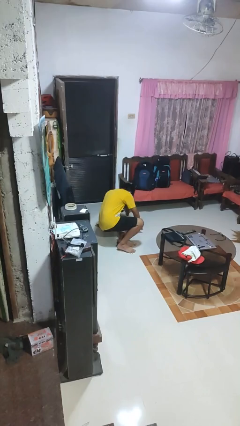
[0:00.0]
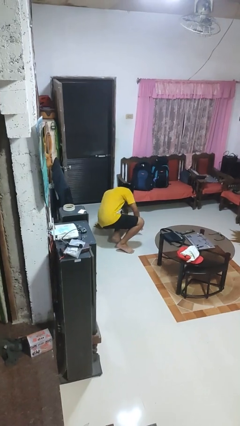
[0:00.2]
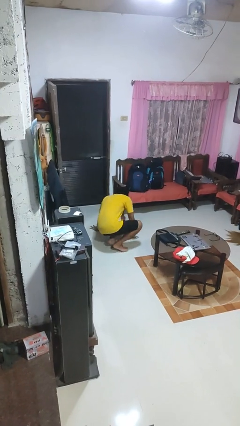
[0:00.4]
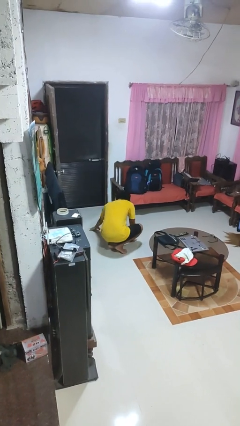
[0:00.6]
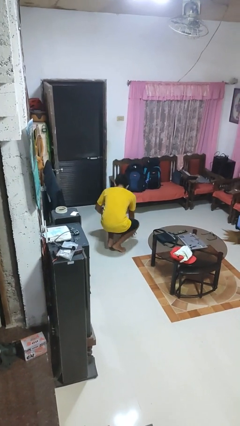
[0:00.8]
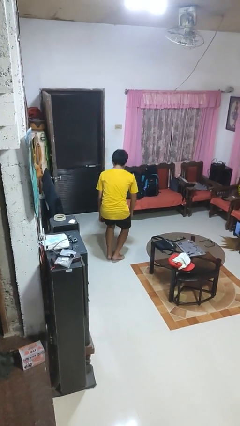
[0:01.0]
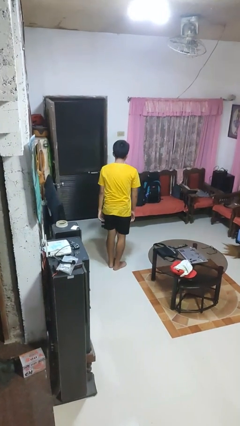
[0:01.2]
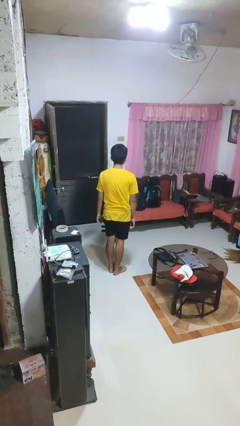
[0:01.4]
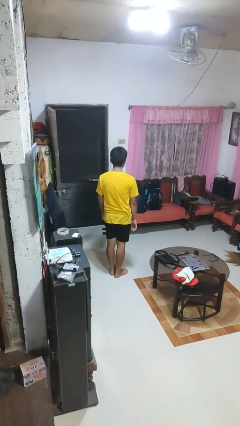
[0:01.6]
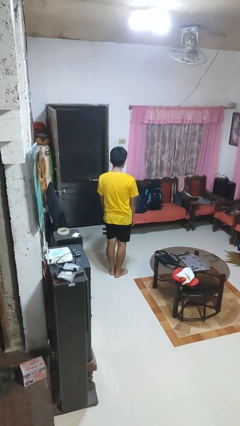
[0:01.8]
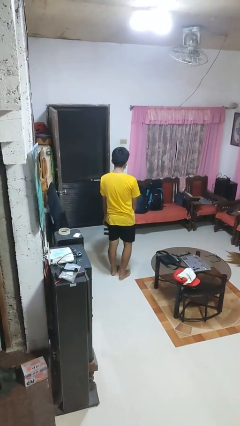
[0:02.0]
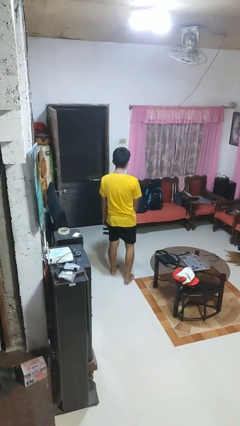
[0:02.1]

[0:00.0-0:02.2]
person stands up from floor

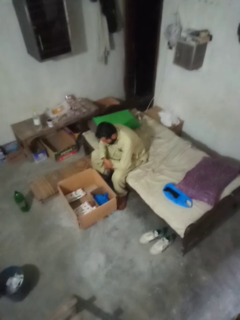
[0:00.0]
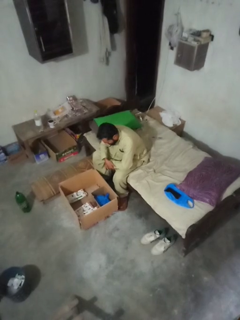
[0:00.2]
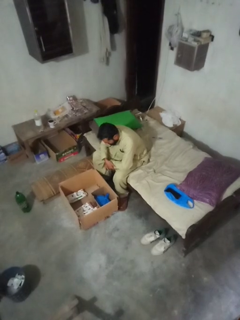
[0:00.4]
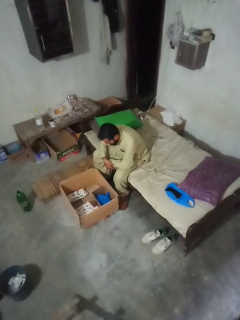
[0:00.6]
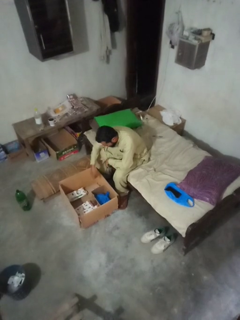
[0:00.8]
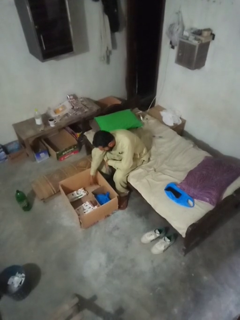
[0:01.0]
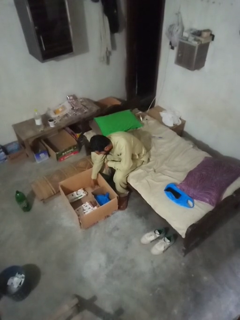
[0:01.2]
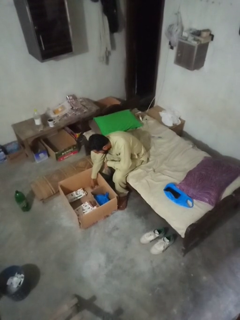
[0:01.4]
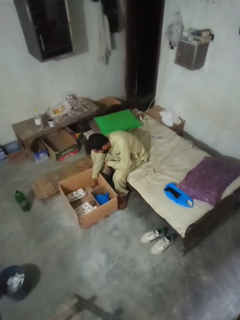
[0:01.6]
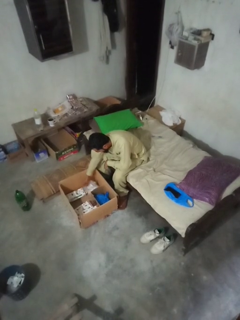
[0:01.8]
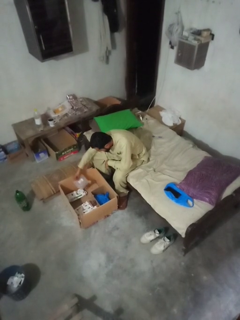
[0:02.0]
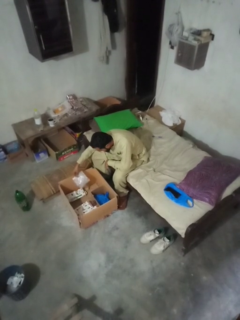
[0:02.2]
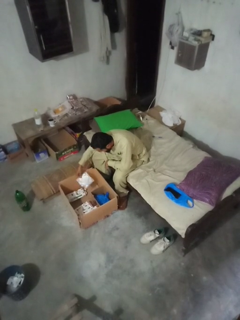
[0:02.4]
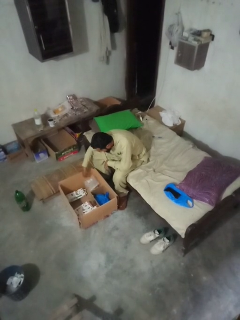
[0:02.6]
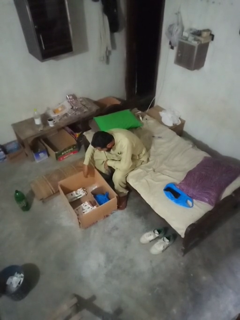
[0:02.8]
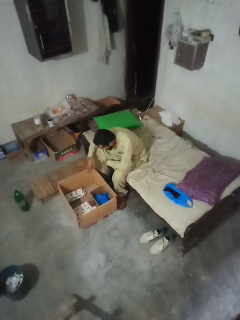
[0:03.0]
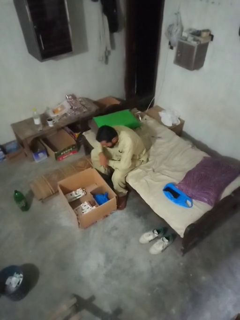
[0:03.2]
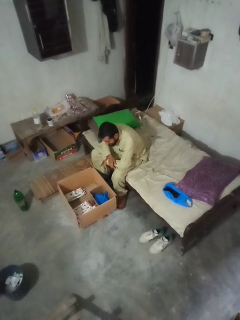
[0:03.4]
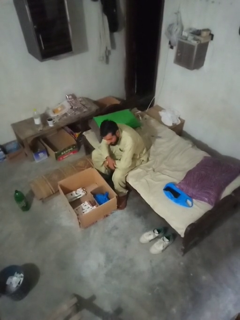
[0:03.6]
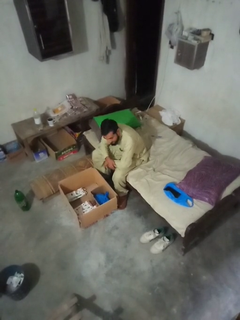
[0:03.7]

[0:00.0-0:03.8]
person searches in box

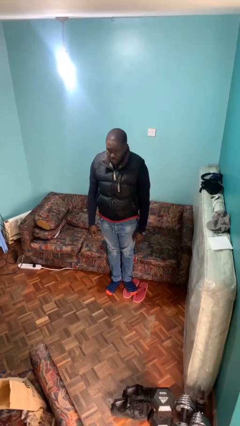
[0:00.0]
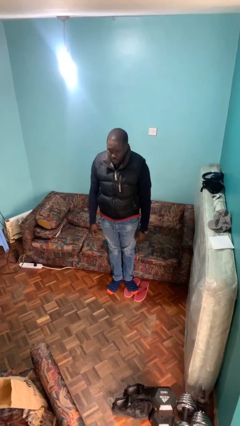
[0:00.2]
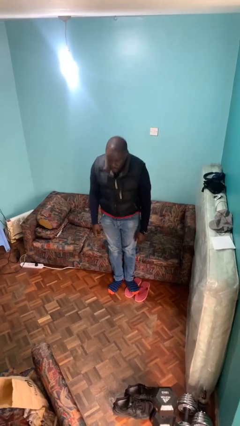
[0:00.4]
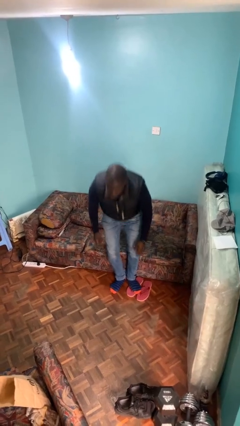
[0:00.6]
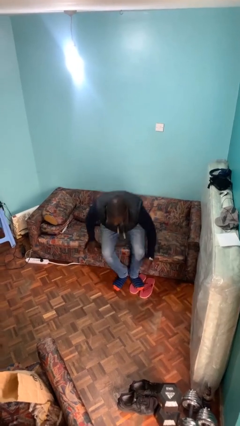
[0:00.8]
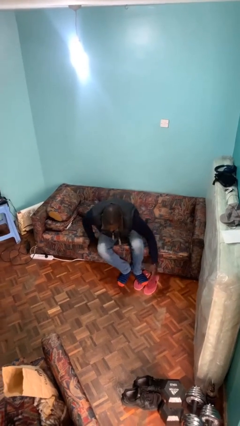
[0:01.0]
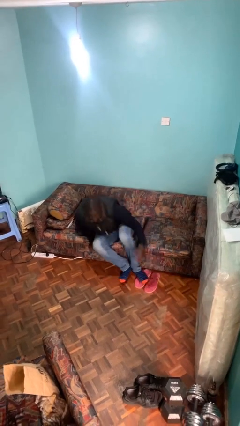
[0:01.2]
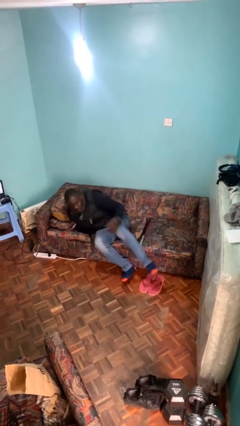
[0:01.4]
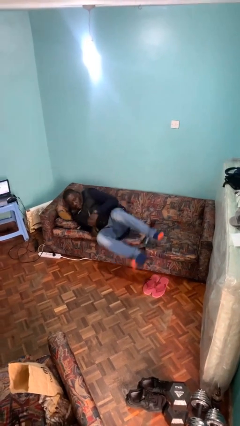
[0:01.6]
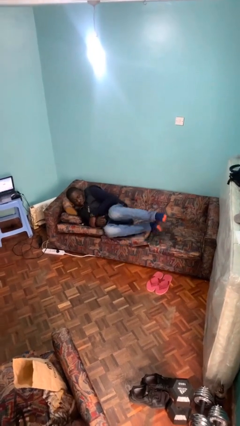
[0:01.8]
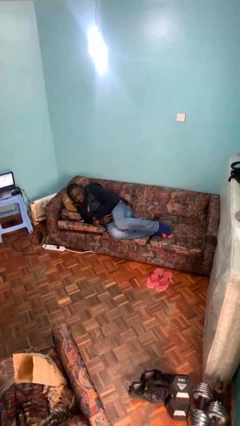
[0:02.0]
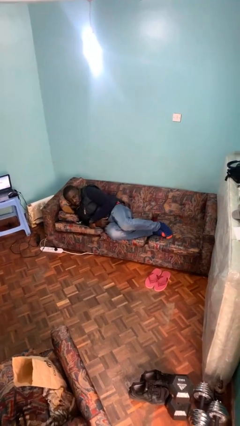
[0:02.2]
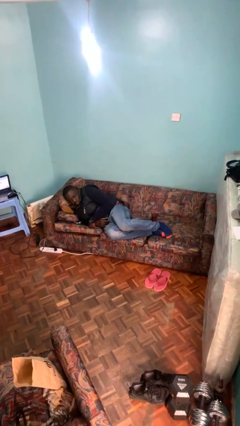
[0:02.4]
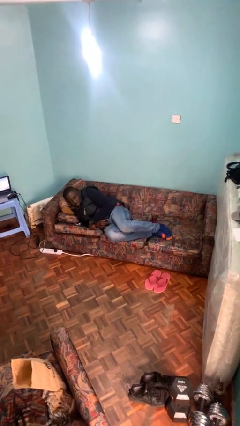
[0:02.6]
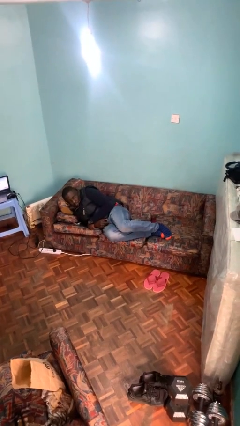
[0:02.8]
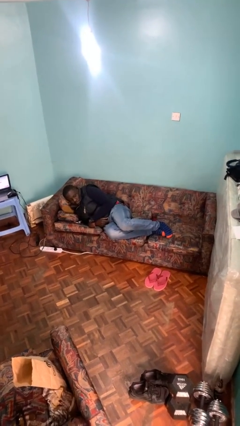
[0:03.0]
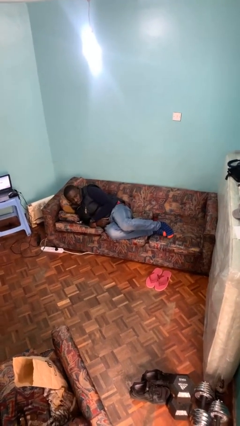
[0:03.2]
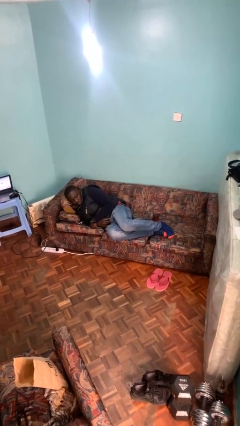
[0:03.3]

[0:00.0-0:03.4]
person lies down on couch

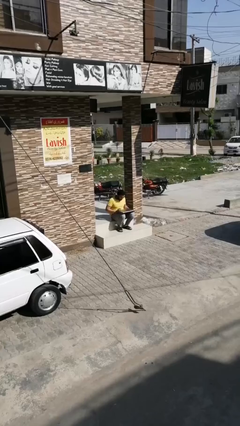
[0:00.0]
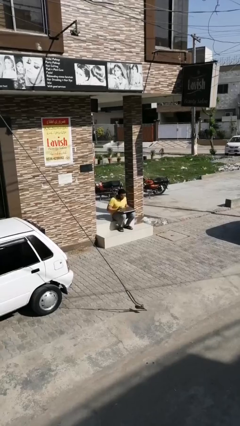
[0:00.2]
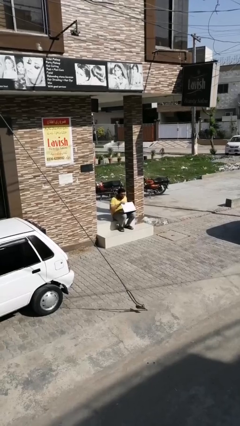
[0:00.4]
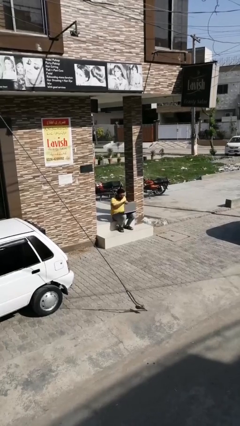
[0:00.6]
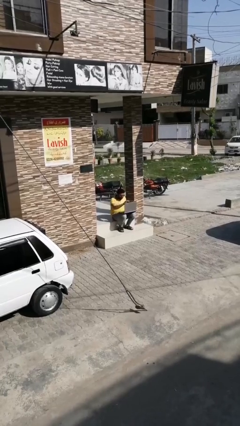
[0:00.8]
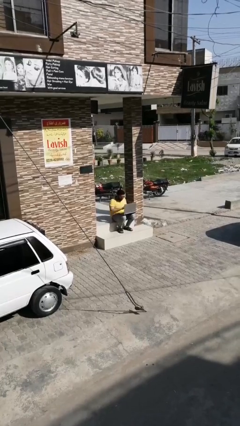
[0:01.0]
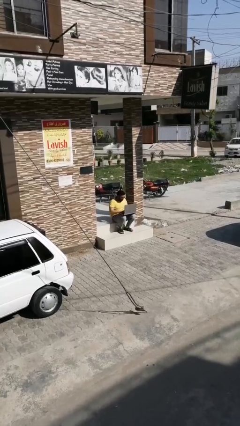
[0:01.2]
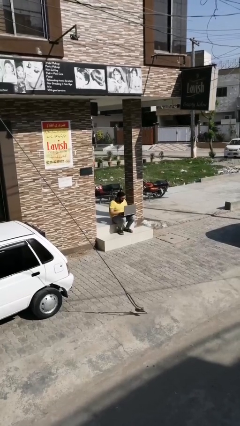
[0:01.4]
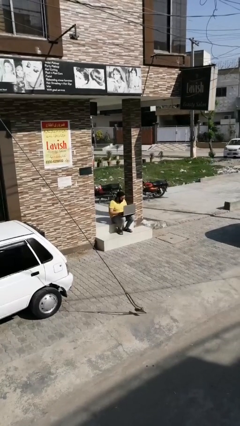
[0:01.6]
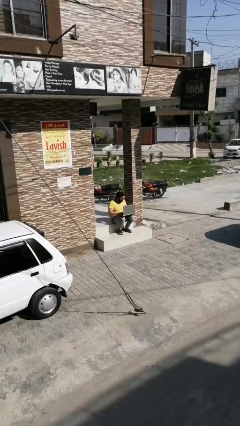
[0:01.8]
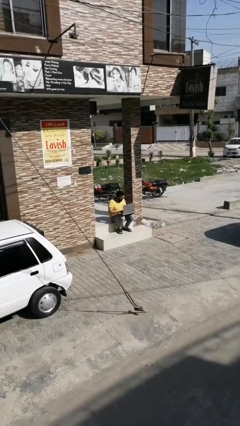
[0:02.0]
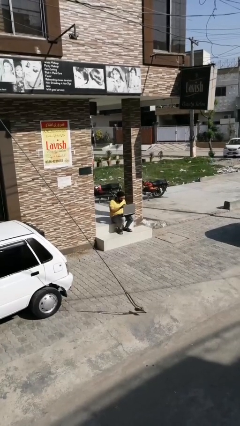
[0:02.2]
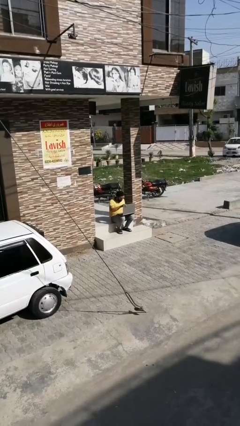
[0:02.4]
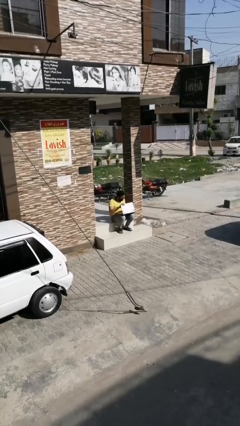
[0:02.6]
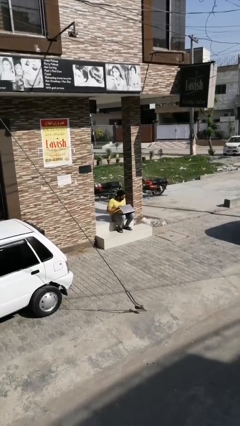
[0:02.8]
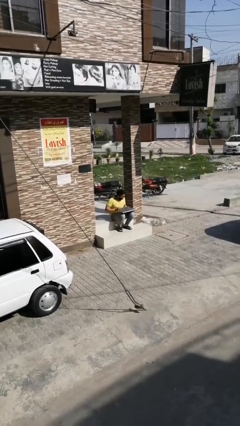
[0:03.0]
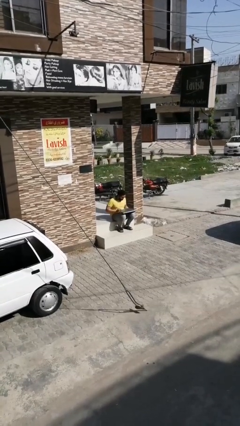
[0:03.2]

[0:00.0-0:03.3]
person interacts with laptop

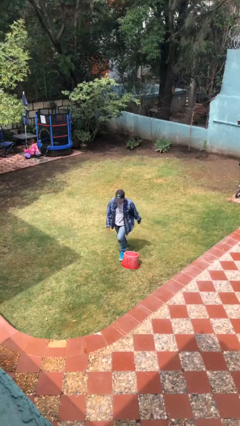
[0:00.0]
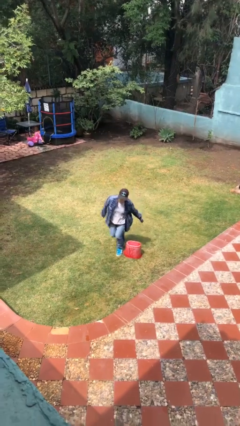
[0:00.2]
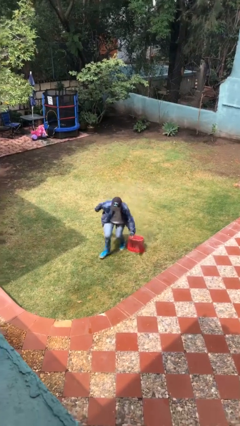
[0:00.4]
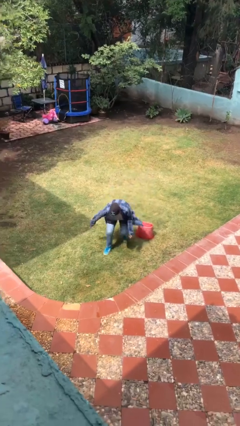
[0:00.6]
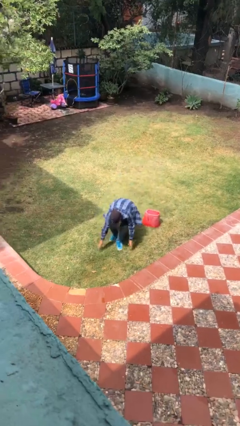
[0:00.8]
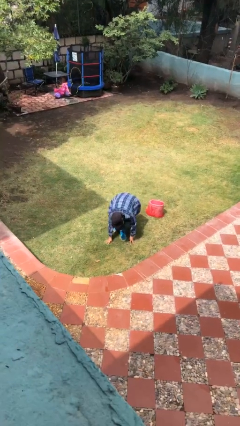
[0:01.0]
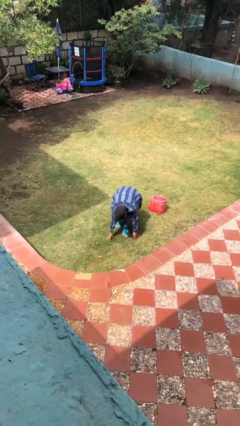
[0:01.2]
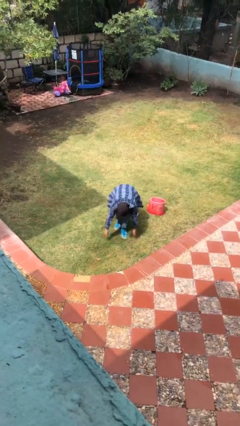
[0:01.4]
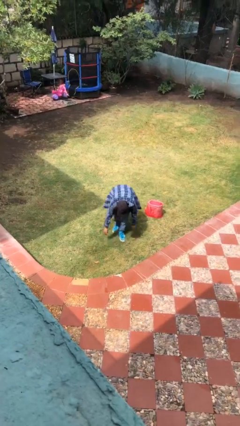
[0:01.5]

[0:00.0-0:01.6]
person trips on object on floor

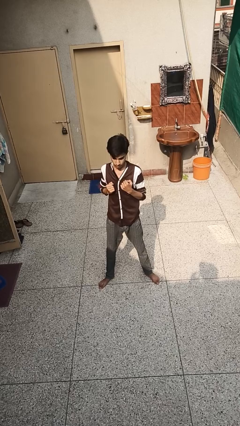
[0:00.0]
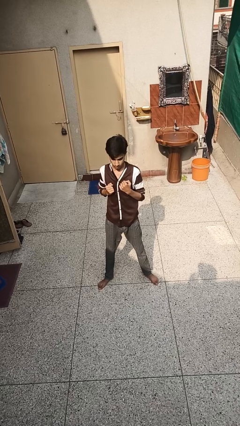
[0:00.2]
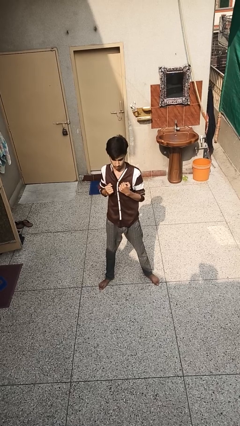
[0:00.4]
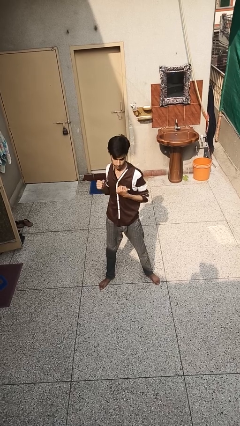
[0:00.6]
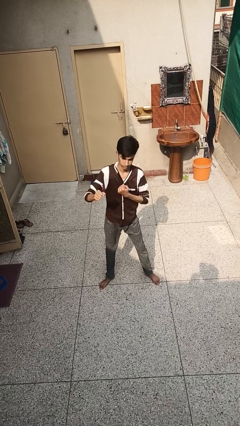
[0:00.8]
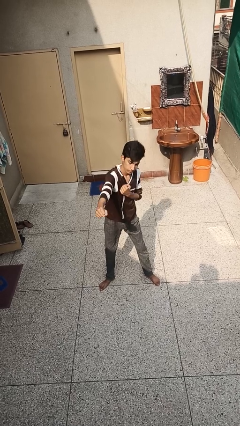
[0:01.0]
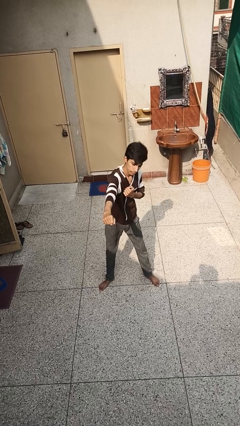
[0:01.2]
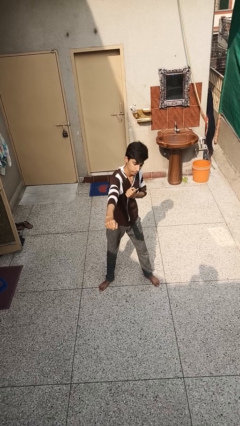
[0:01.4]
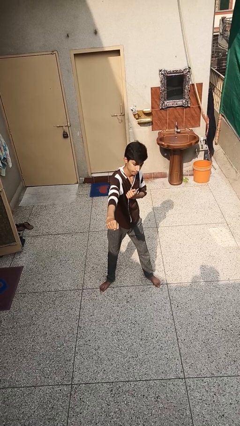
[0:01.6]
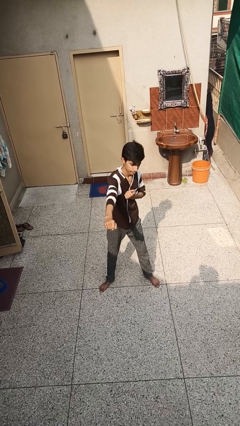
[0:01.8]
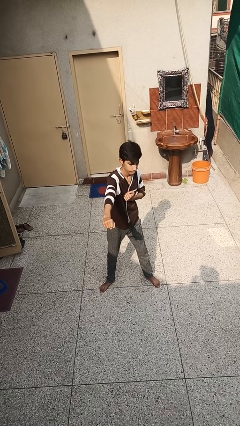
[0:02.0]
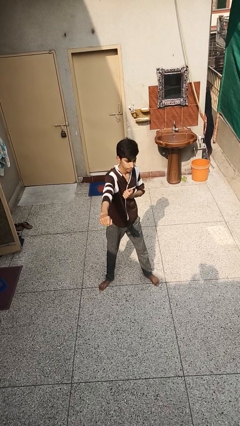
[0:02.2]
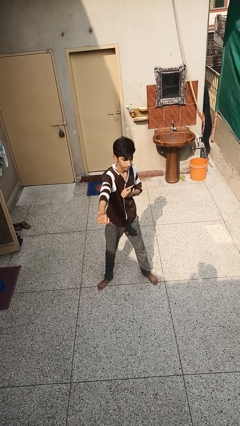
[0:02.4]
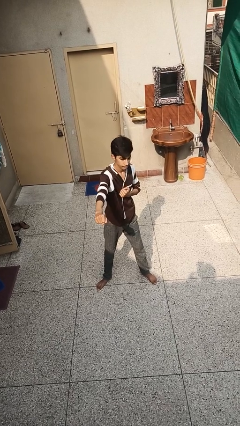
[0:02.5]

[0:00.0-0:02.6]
person punches

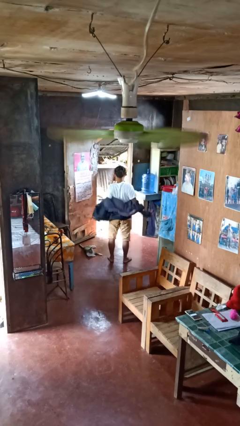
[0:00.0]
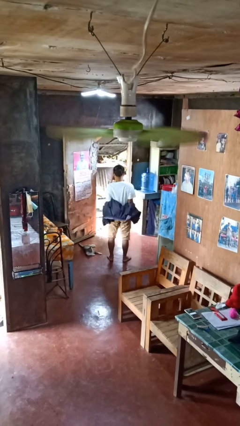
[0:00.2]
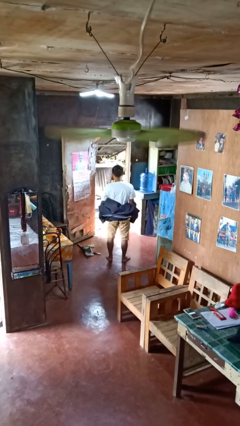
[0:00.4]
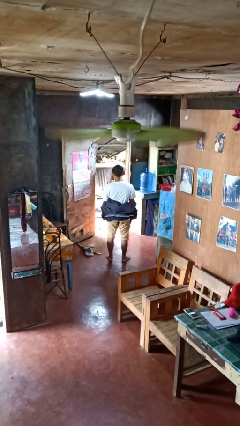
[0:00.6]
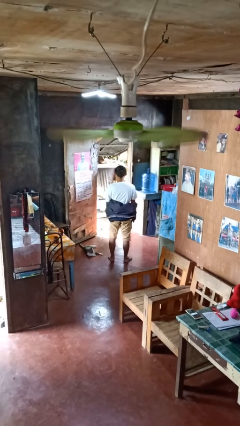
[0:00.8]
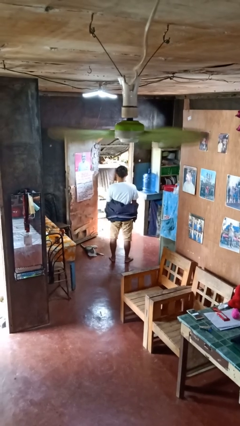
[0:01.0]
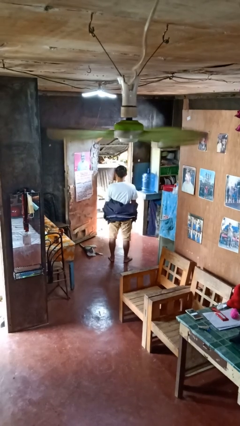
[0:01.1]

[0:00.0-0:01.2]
person takes off jacket
